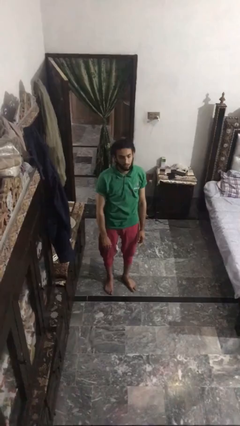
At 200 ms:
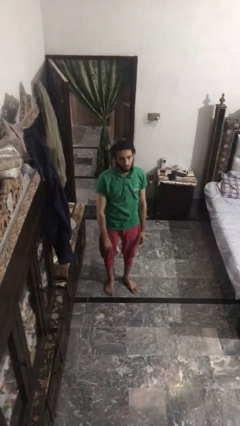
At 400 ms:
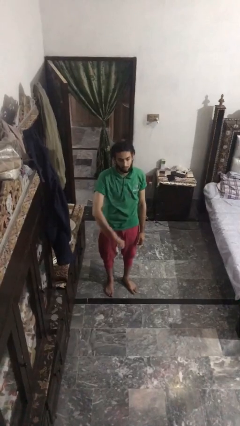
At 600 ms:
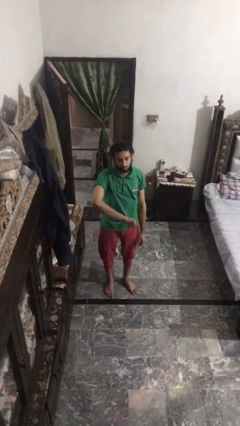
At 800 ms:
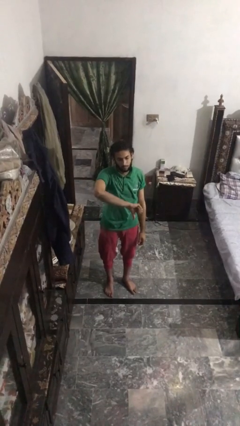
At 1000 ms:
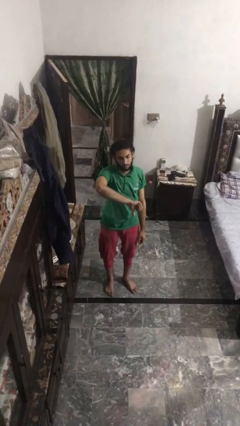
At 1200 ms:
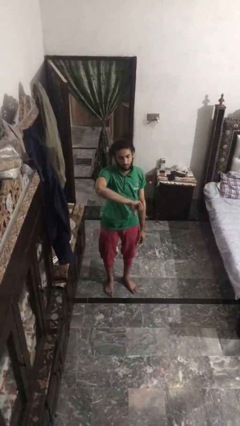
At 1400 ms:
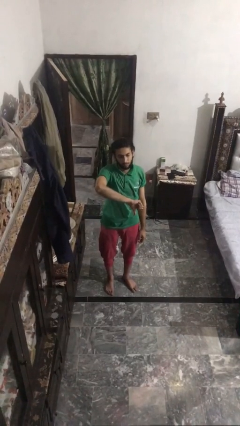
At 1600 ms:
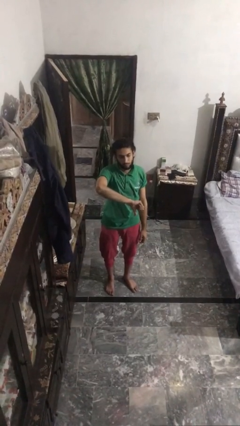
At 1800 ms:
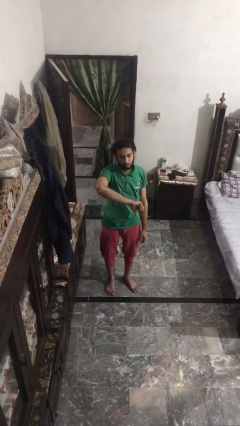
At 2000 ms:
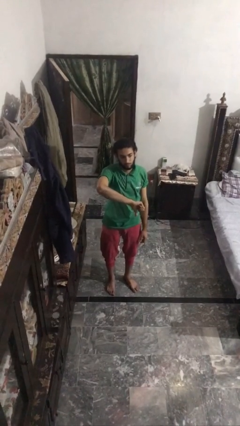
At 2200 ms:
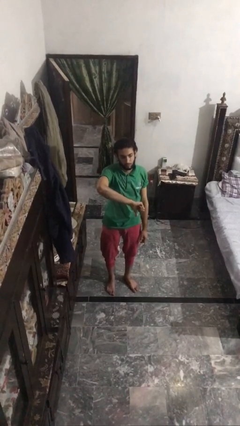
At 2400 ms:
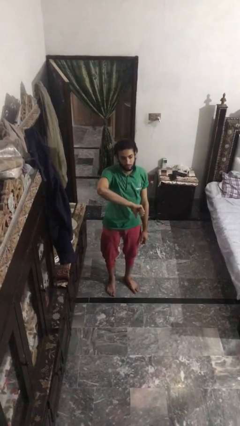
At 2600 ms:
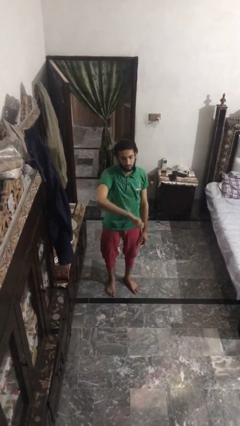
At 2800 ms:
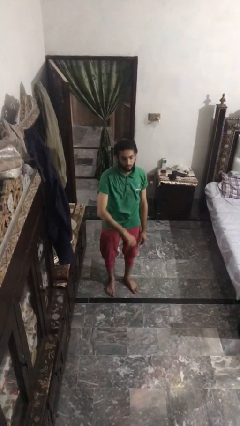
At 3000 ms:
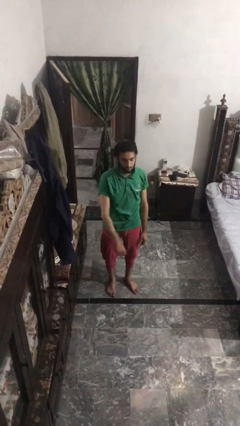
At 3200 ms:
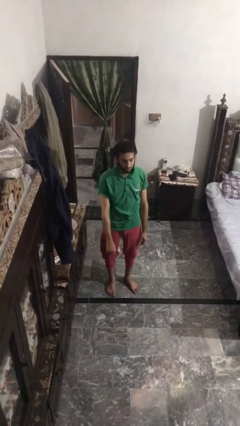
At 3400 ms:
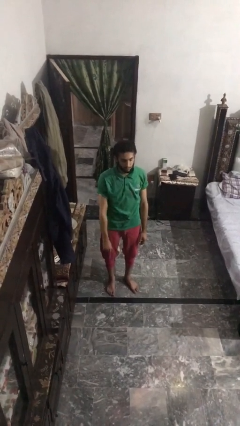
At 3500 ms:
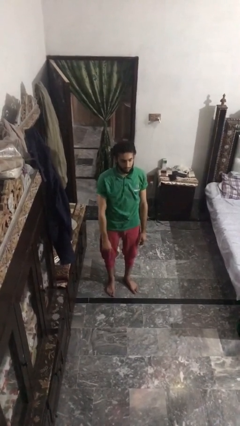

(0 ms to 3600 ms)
person gestures thumbs down

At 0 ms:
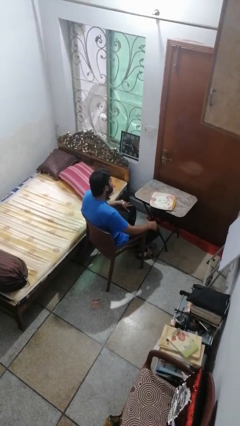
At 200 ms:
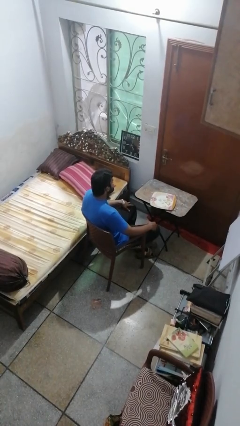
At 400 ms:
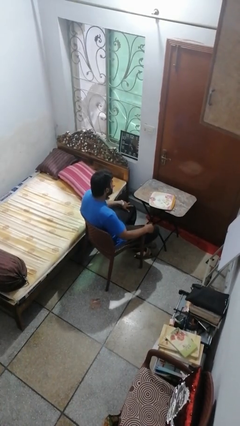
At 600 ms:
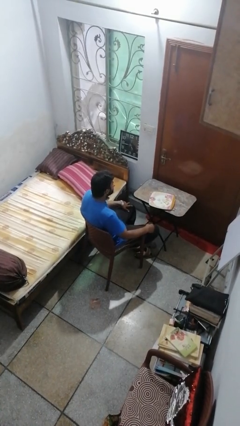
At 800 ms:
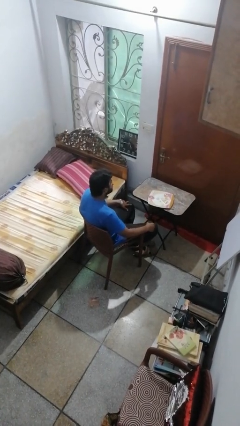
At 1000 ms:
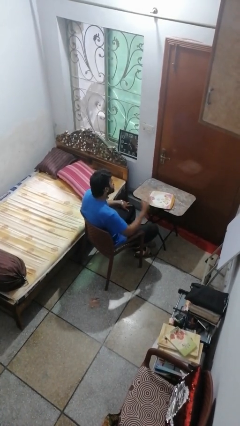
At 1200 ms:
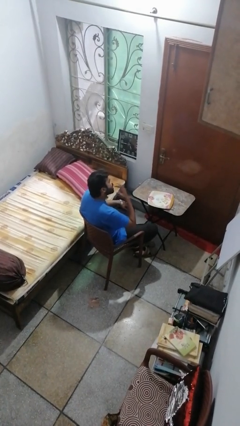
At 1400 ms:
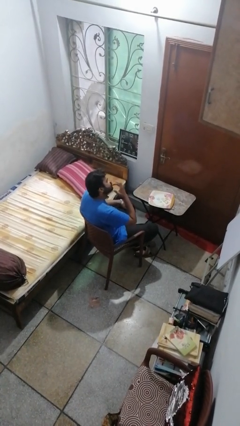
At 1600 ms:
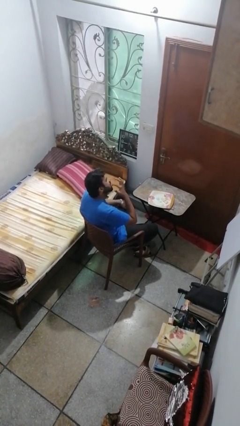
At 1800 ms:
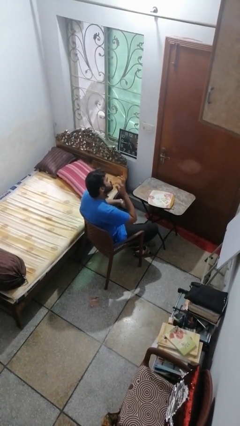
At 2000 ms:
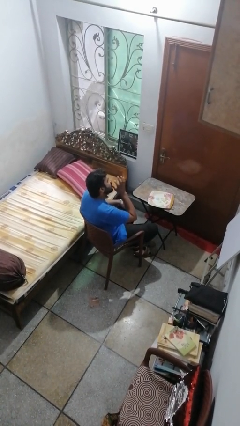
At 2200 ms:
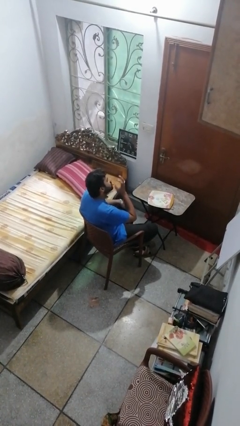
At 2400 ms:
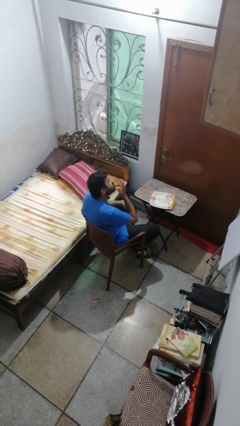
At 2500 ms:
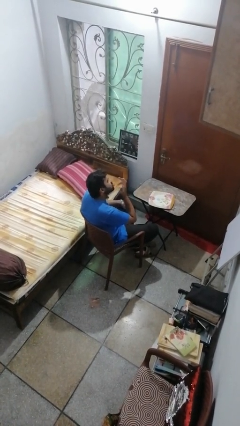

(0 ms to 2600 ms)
person licks fingers

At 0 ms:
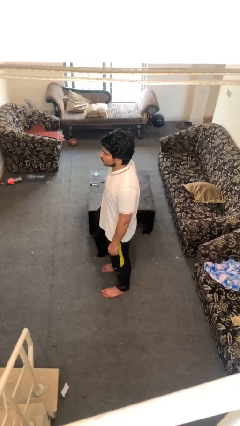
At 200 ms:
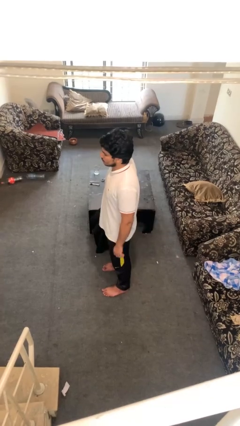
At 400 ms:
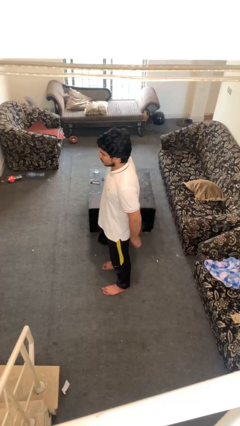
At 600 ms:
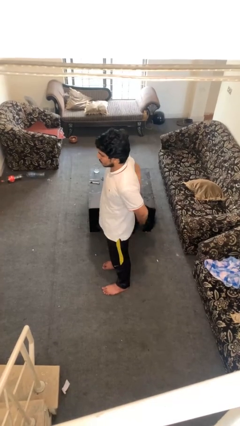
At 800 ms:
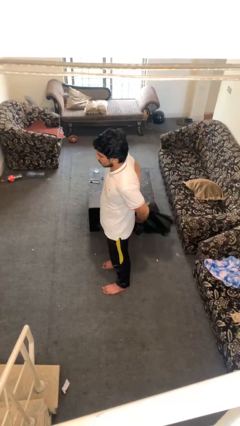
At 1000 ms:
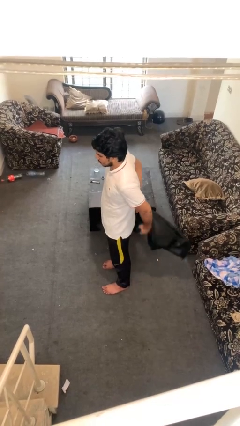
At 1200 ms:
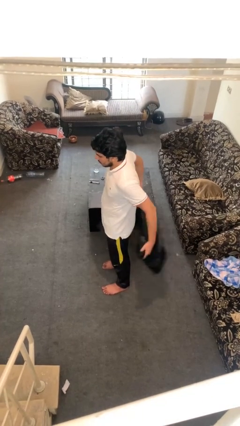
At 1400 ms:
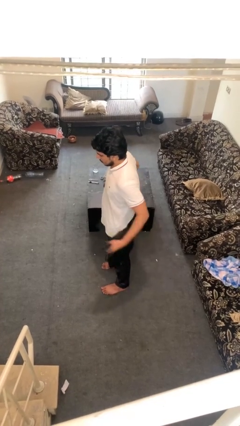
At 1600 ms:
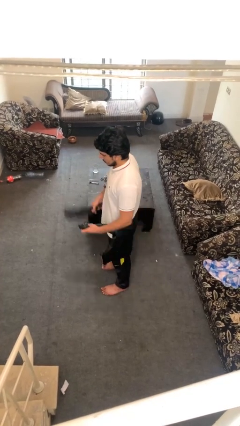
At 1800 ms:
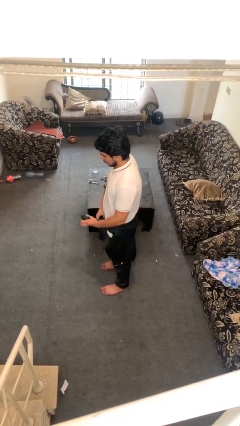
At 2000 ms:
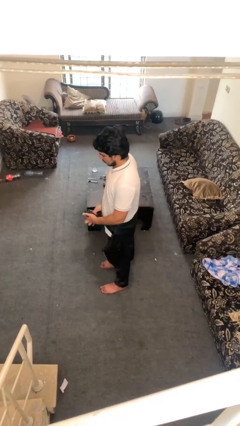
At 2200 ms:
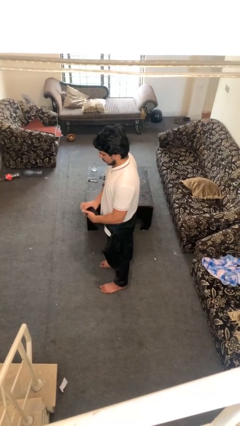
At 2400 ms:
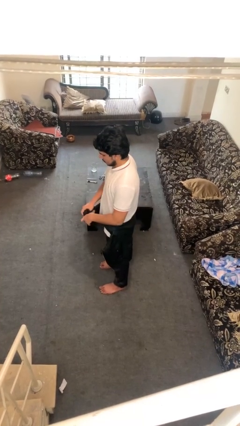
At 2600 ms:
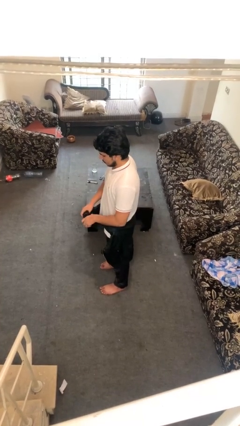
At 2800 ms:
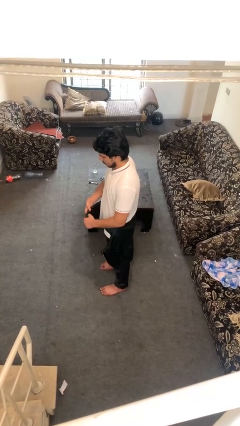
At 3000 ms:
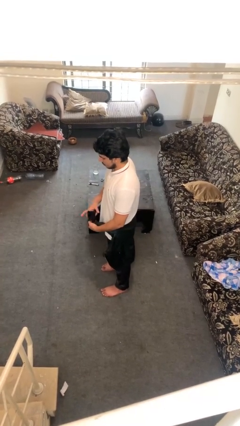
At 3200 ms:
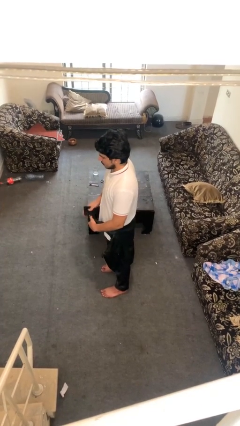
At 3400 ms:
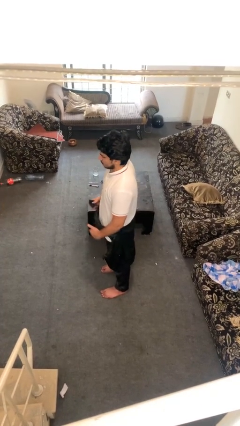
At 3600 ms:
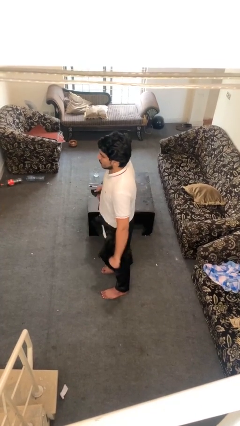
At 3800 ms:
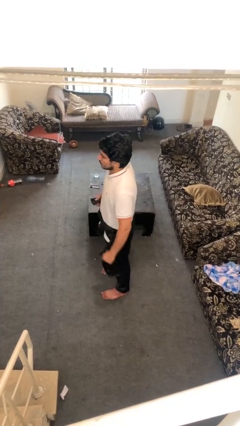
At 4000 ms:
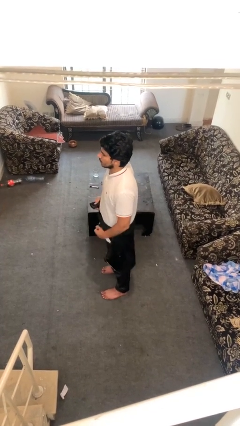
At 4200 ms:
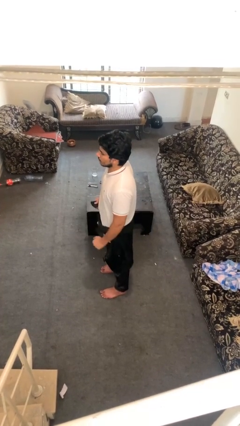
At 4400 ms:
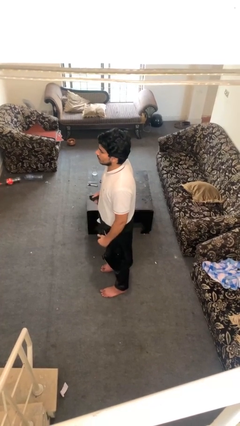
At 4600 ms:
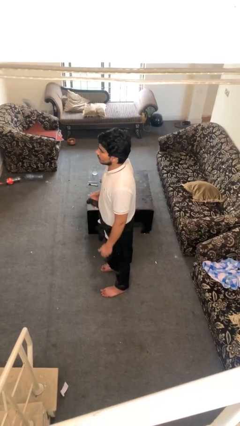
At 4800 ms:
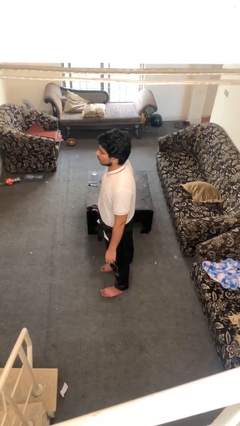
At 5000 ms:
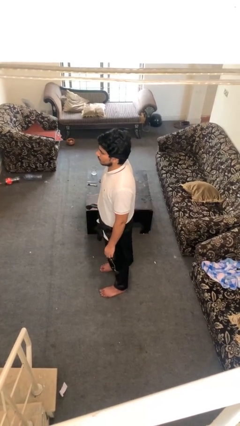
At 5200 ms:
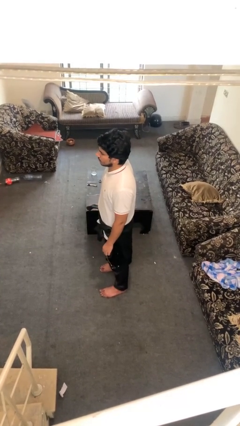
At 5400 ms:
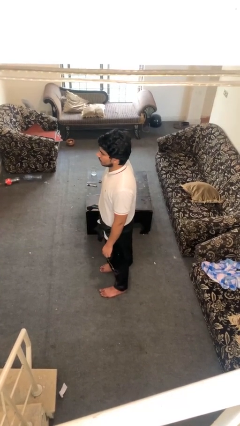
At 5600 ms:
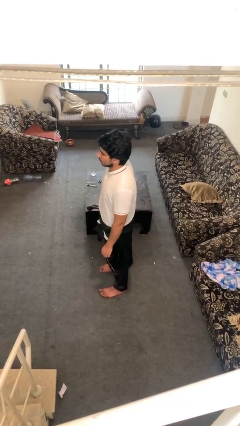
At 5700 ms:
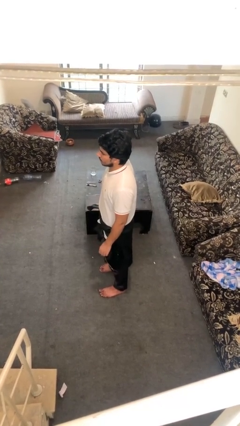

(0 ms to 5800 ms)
person ties jacket around waist

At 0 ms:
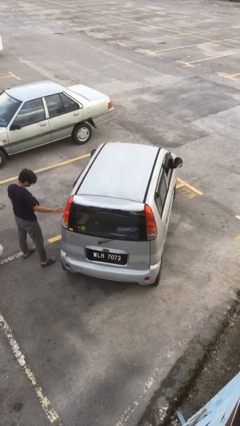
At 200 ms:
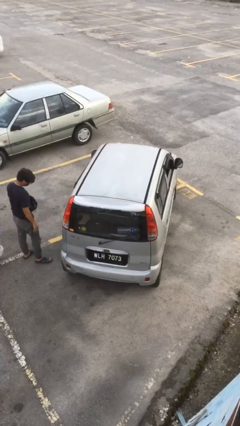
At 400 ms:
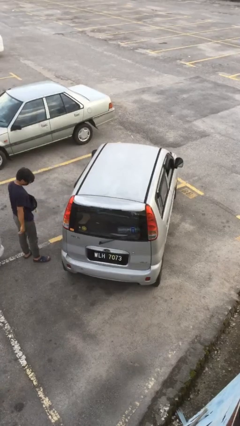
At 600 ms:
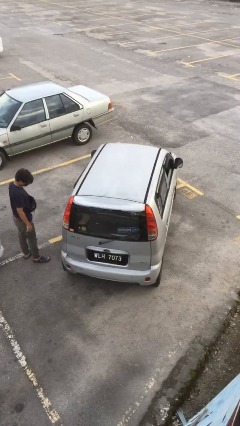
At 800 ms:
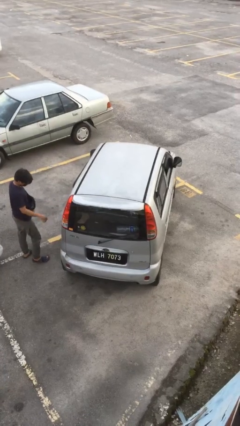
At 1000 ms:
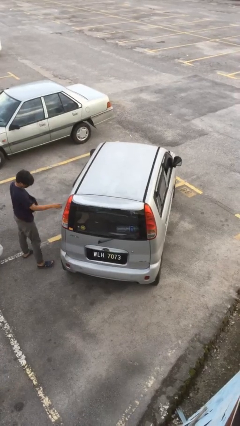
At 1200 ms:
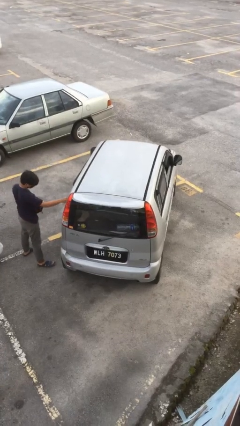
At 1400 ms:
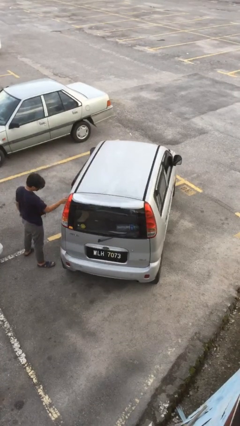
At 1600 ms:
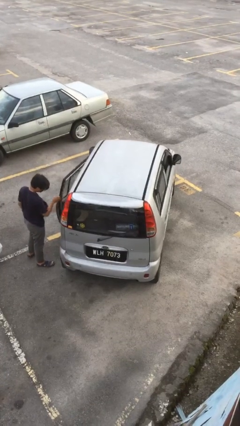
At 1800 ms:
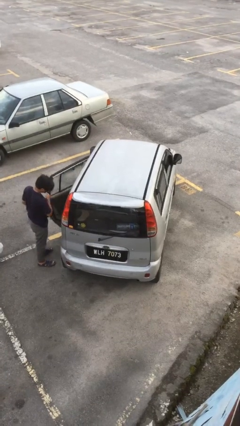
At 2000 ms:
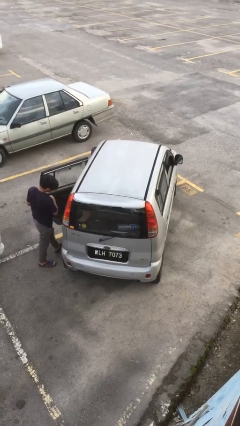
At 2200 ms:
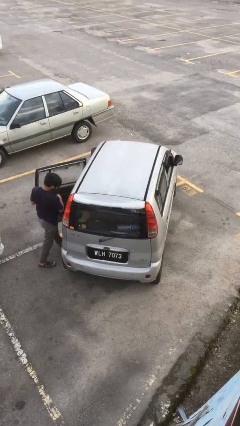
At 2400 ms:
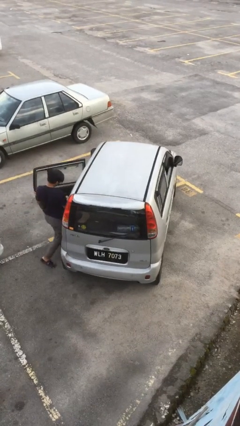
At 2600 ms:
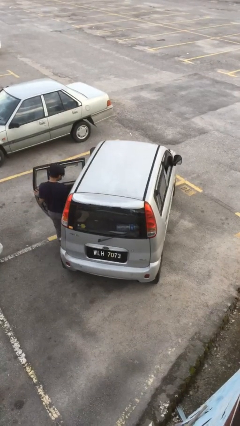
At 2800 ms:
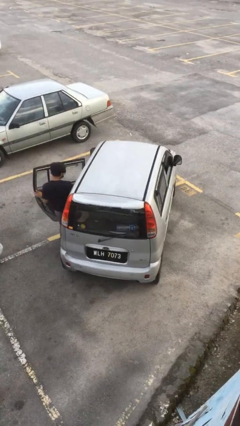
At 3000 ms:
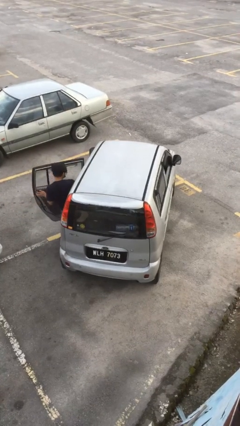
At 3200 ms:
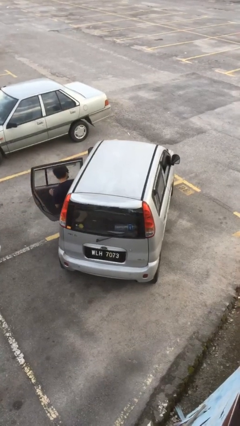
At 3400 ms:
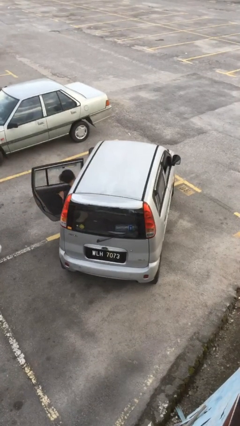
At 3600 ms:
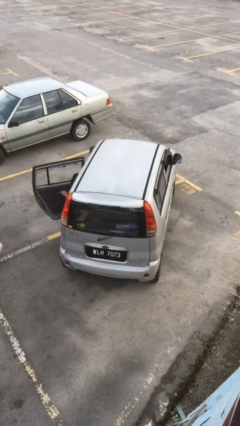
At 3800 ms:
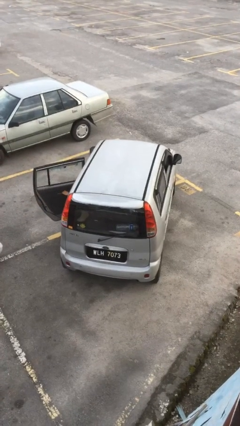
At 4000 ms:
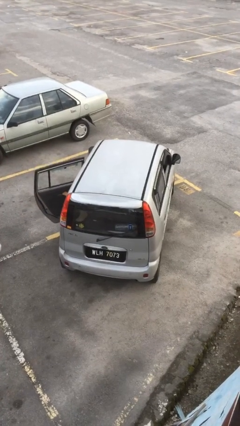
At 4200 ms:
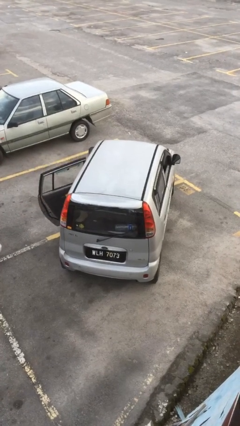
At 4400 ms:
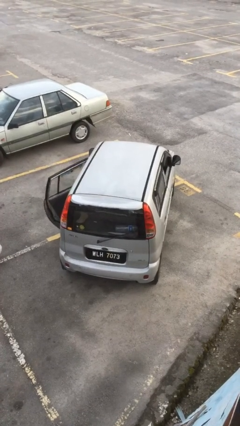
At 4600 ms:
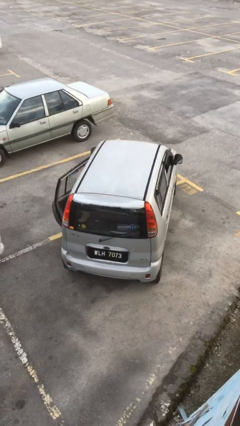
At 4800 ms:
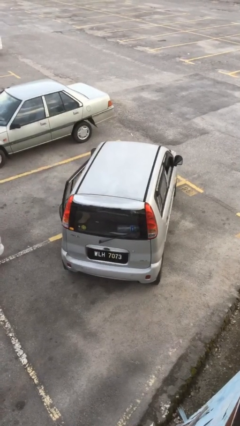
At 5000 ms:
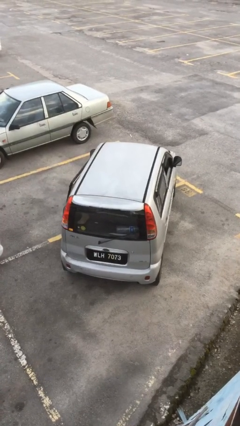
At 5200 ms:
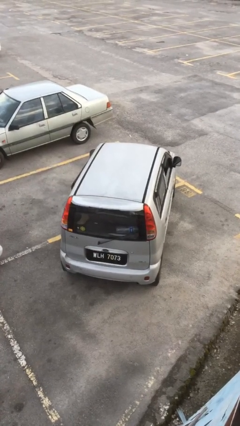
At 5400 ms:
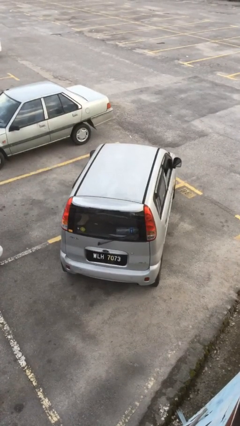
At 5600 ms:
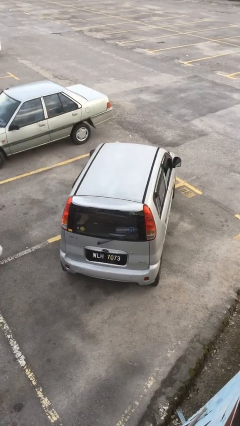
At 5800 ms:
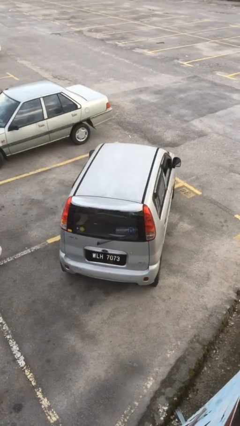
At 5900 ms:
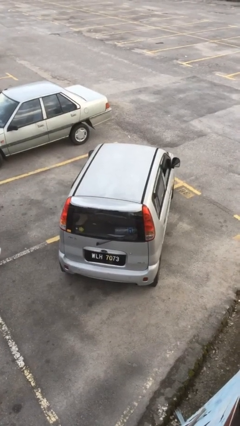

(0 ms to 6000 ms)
car picks up person
